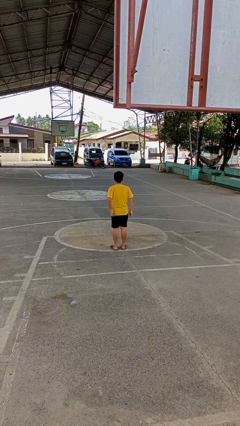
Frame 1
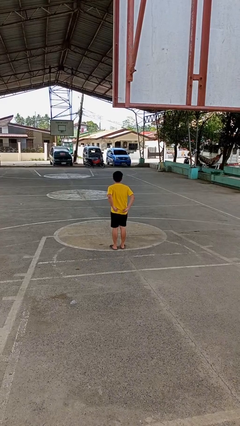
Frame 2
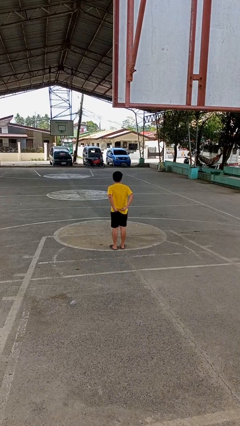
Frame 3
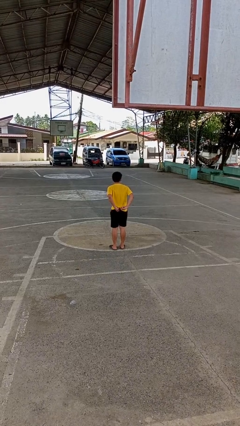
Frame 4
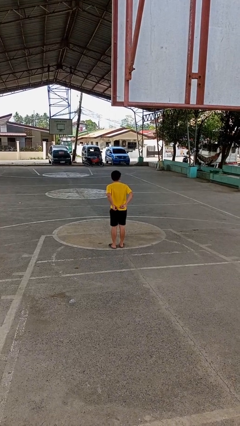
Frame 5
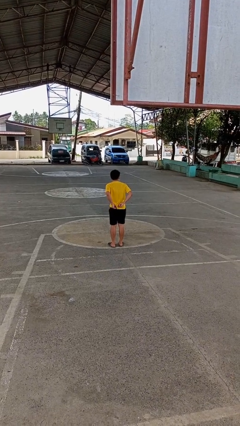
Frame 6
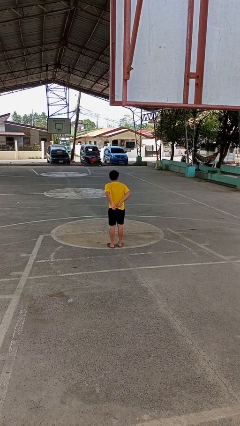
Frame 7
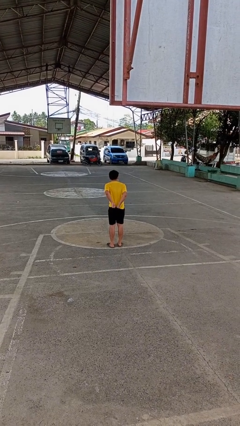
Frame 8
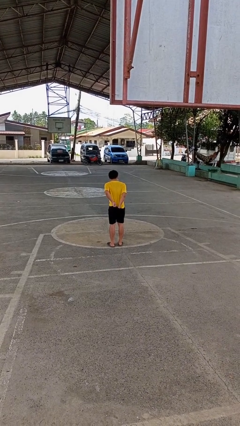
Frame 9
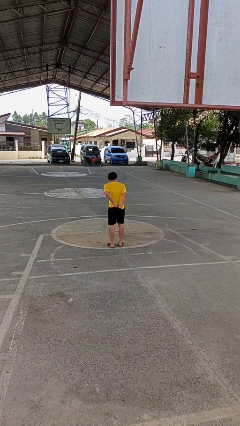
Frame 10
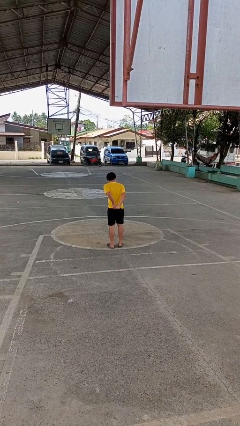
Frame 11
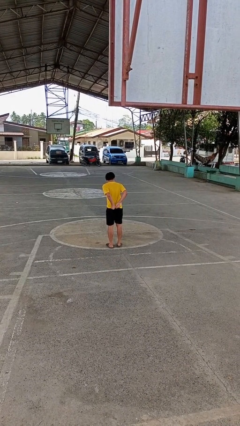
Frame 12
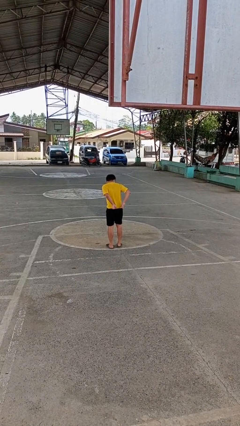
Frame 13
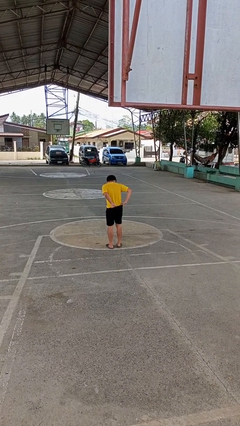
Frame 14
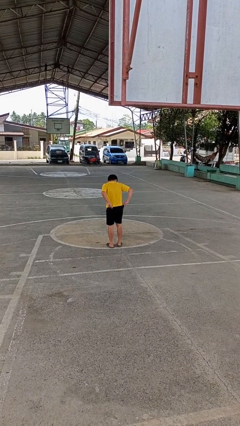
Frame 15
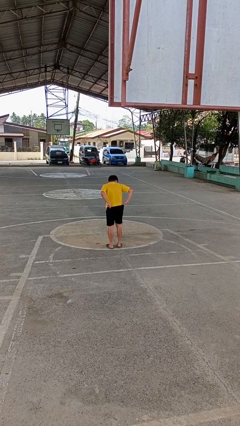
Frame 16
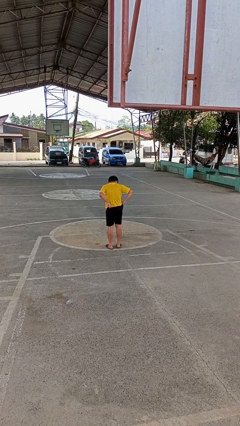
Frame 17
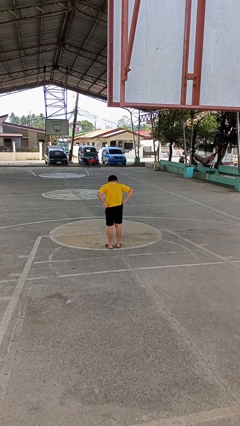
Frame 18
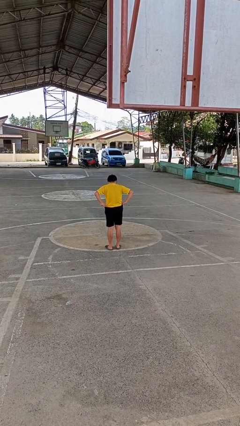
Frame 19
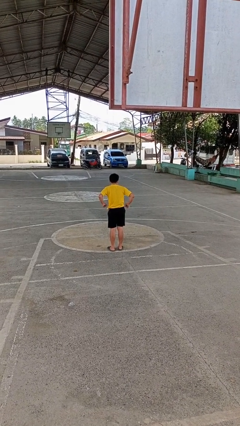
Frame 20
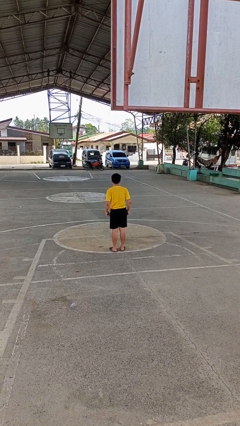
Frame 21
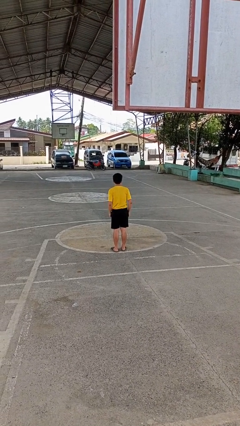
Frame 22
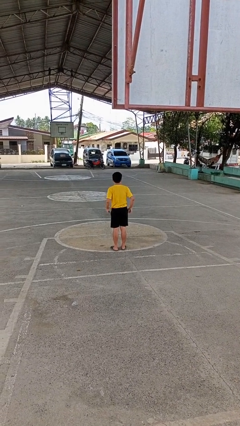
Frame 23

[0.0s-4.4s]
person tucks in shirt

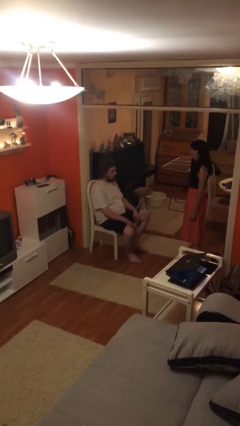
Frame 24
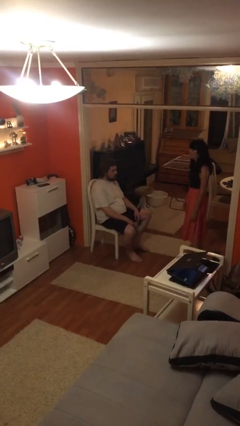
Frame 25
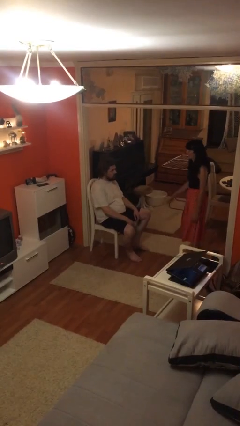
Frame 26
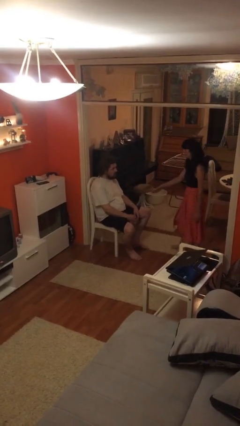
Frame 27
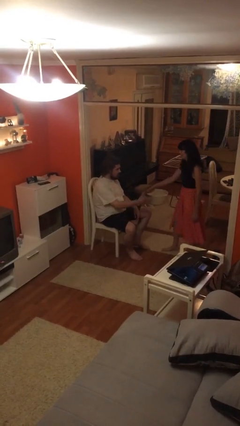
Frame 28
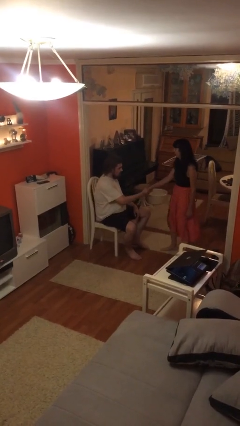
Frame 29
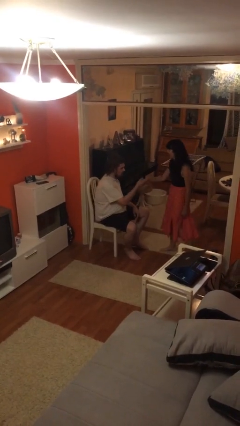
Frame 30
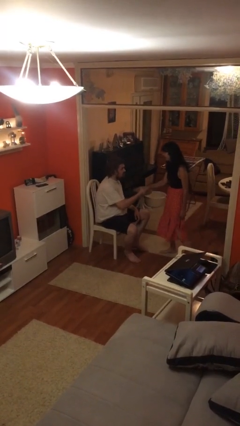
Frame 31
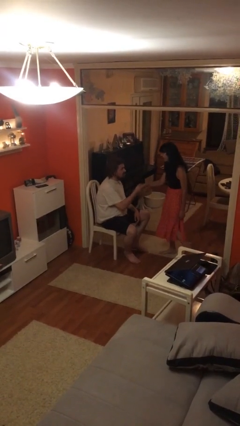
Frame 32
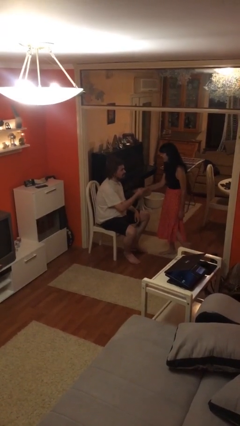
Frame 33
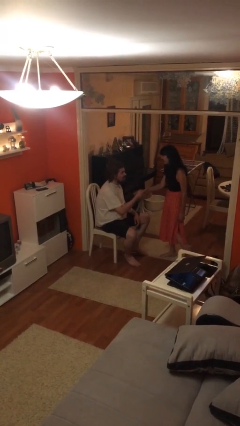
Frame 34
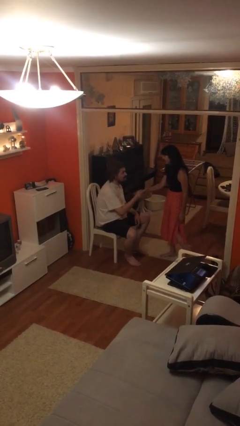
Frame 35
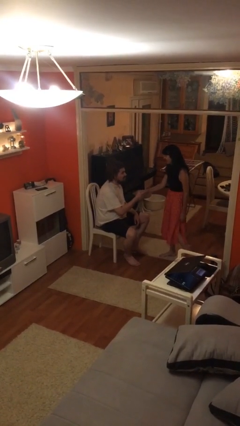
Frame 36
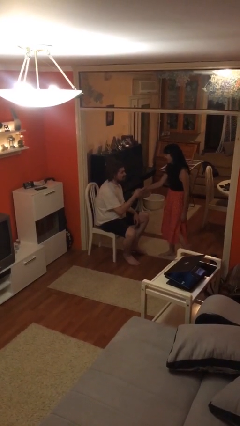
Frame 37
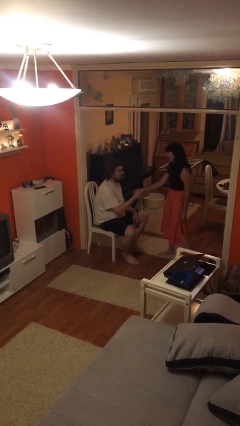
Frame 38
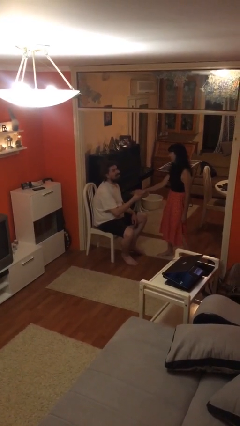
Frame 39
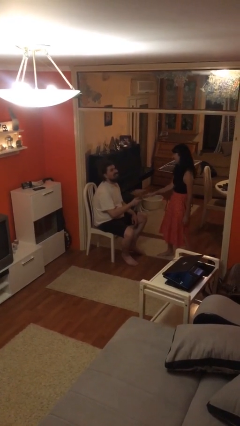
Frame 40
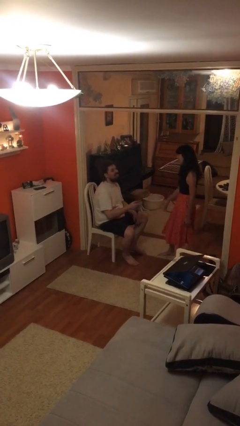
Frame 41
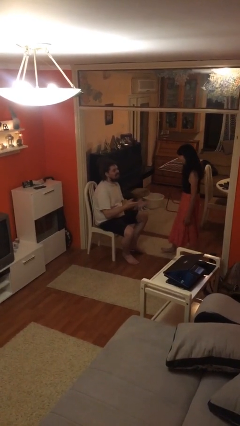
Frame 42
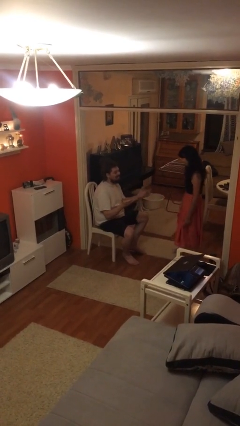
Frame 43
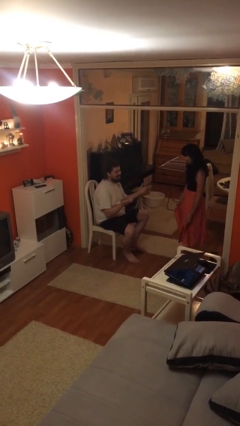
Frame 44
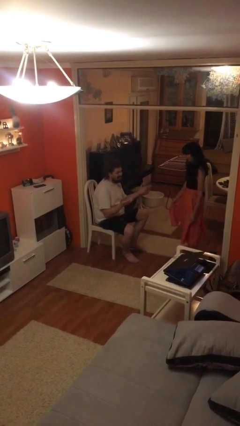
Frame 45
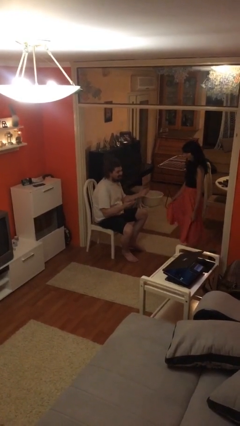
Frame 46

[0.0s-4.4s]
person shakes hand

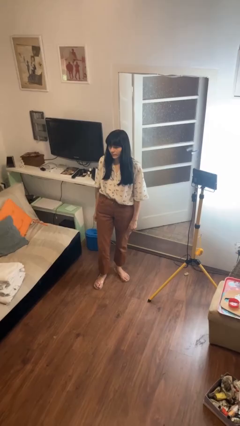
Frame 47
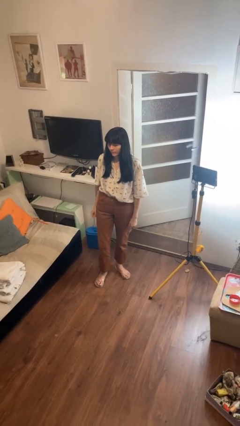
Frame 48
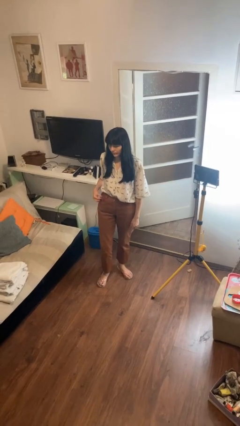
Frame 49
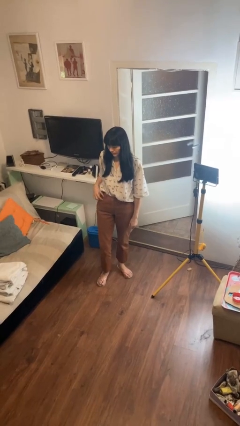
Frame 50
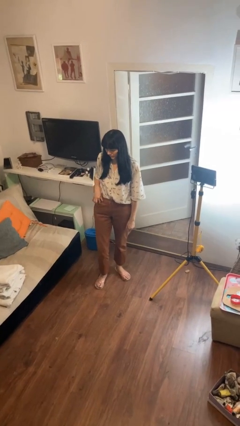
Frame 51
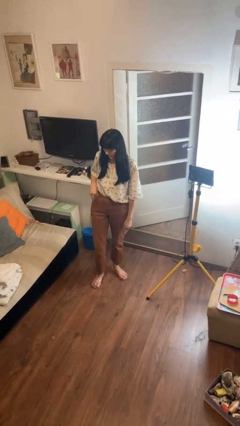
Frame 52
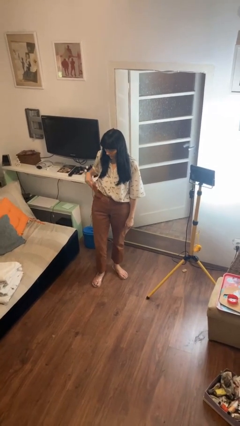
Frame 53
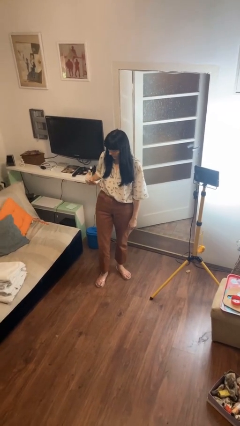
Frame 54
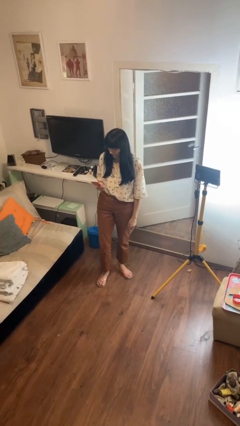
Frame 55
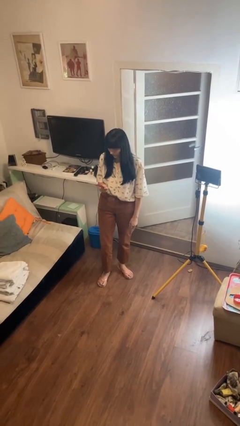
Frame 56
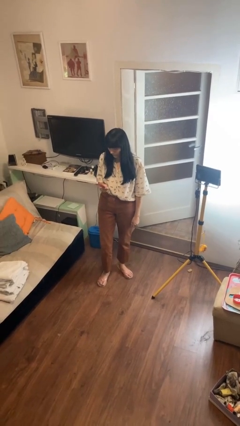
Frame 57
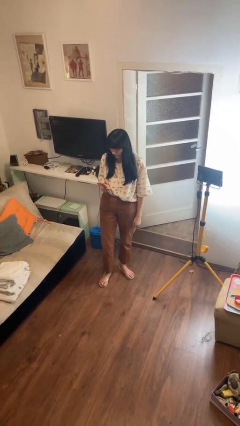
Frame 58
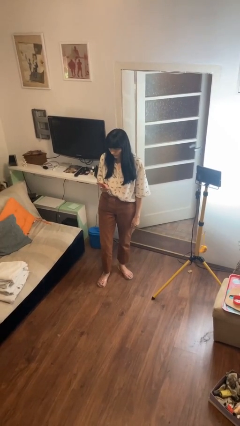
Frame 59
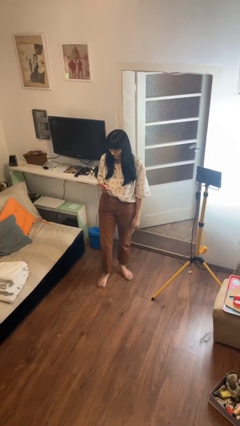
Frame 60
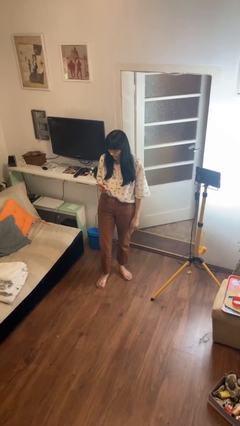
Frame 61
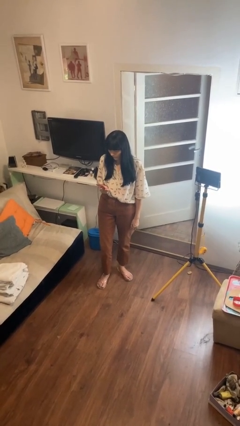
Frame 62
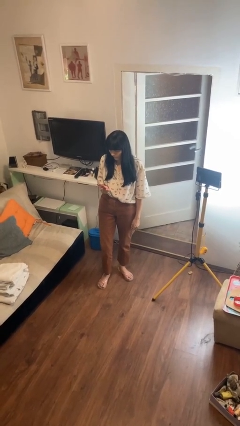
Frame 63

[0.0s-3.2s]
person takes phone from pocket

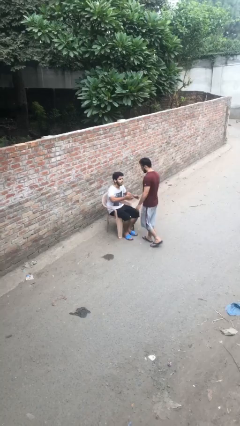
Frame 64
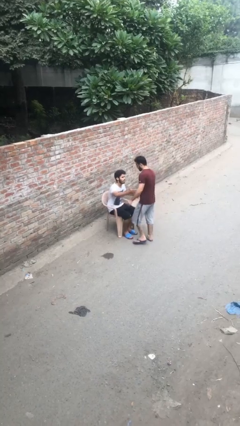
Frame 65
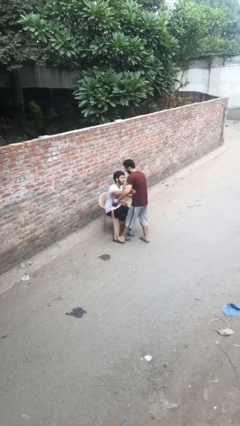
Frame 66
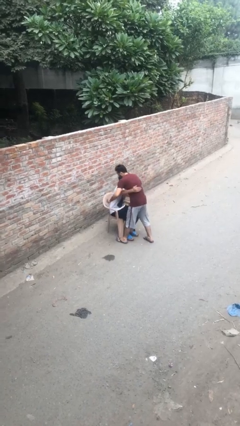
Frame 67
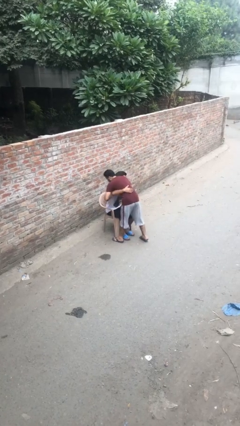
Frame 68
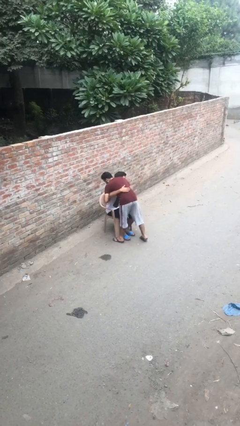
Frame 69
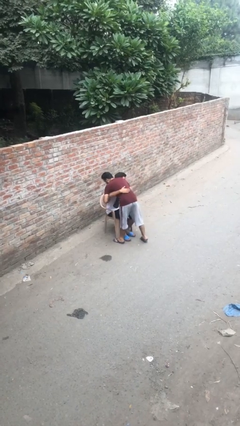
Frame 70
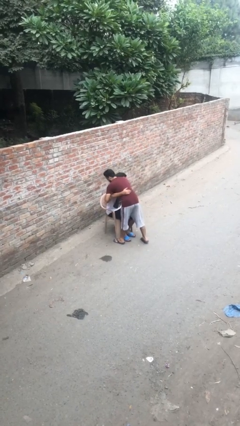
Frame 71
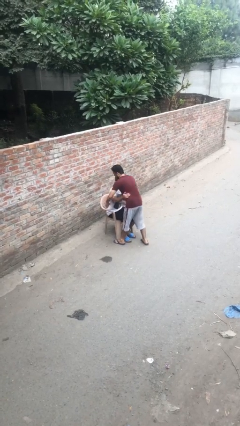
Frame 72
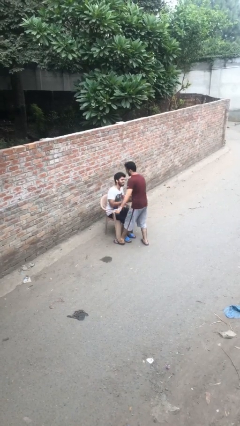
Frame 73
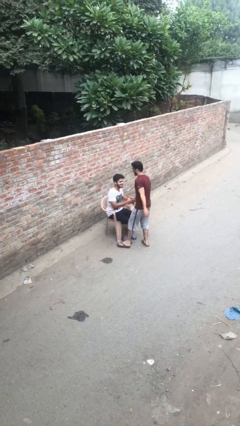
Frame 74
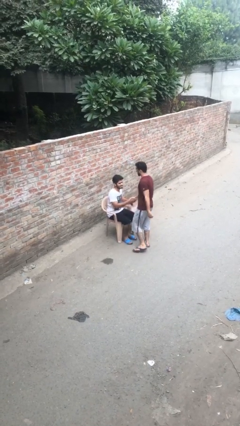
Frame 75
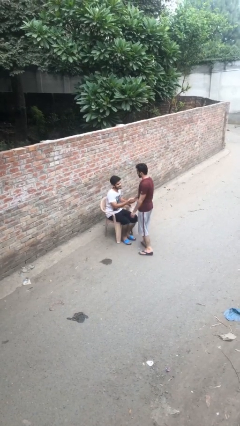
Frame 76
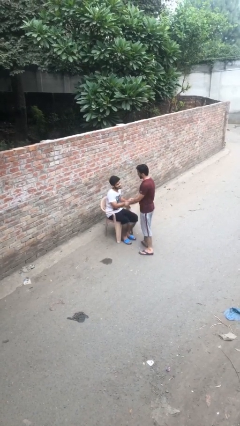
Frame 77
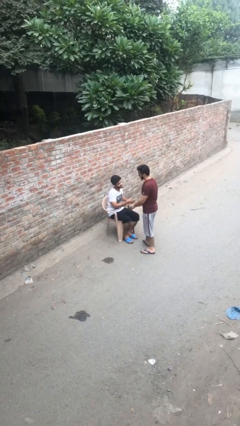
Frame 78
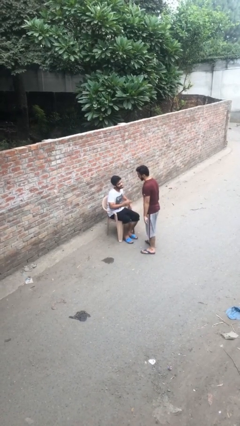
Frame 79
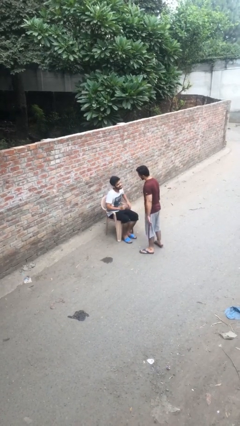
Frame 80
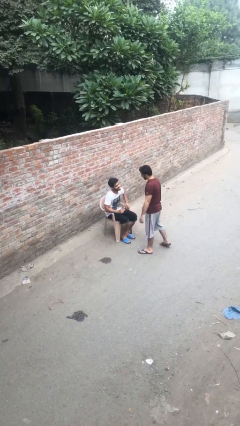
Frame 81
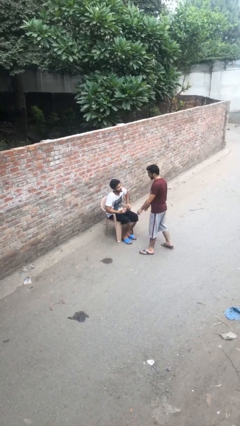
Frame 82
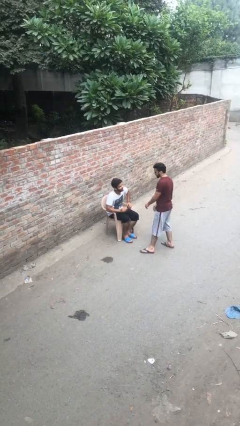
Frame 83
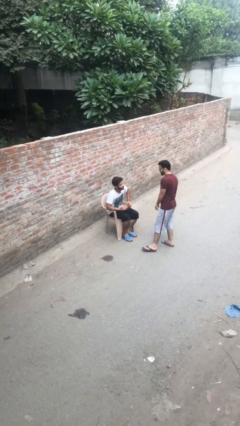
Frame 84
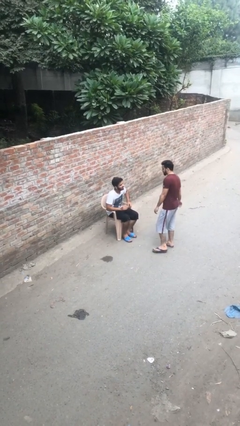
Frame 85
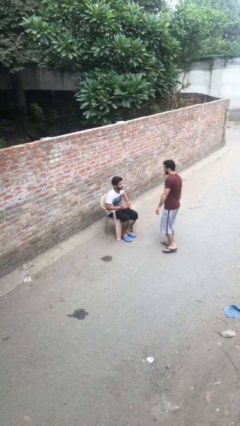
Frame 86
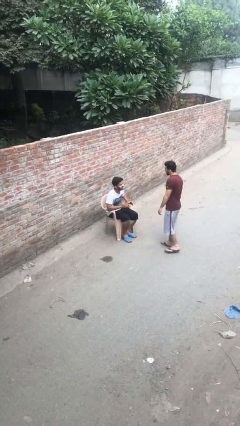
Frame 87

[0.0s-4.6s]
person embraces person

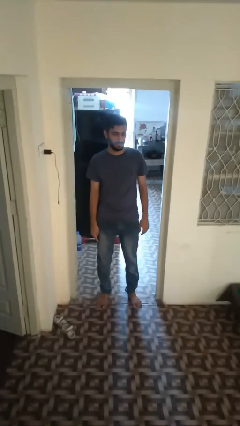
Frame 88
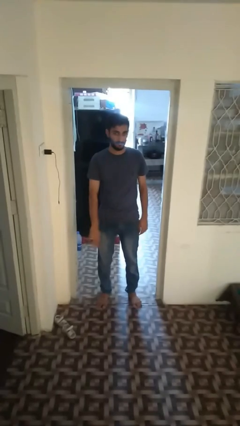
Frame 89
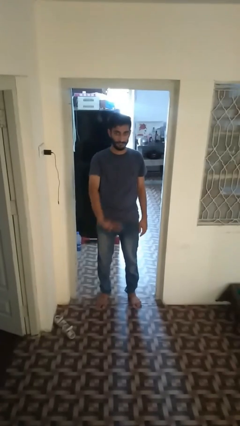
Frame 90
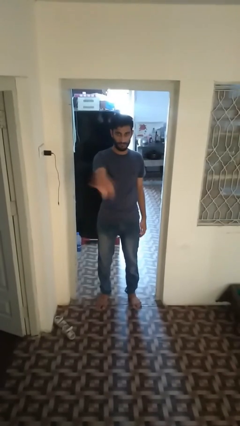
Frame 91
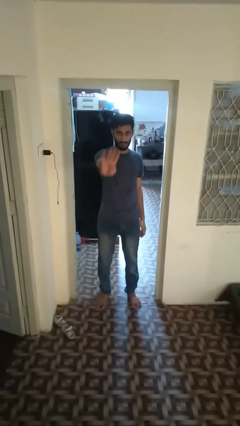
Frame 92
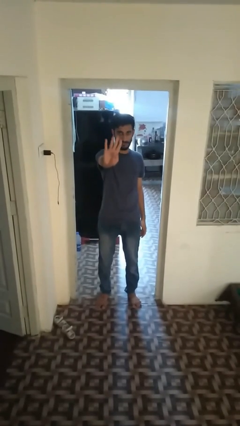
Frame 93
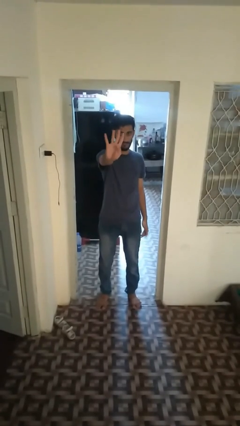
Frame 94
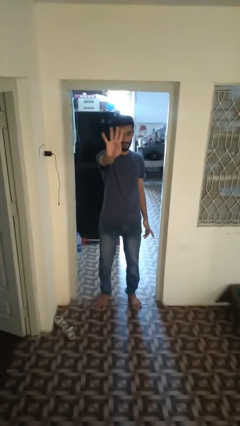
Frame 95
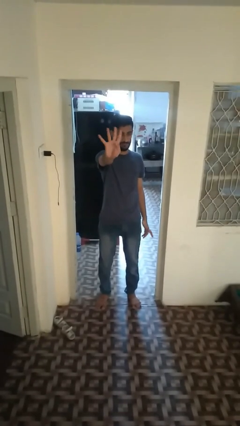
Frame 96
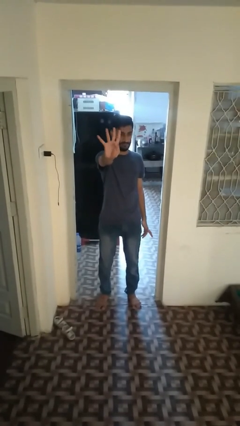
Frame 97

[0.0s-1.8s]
person gestures number four
